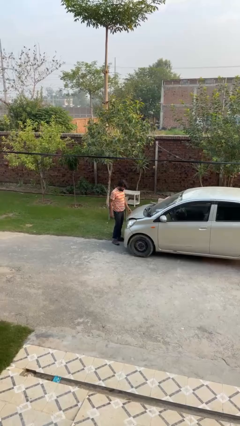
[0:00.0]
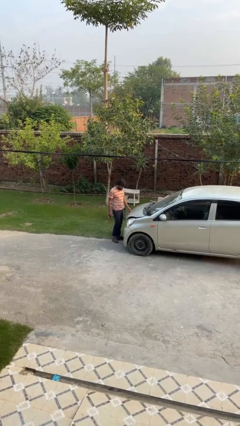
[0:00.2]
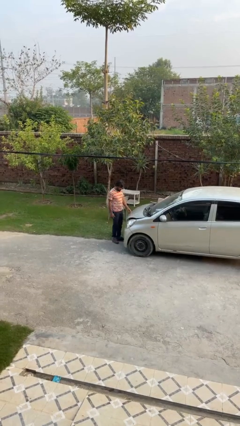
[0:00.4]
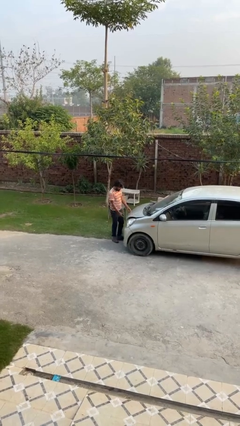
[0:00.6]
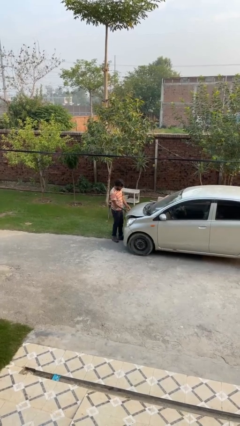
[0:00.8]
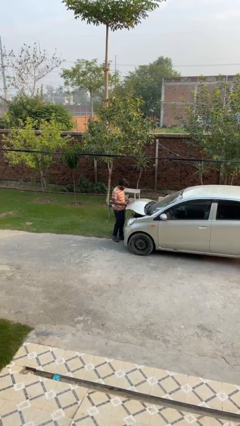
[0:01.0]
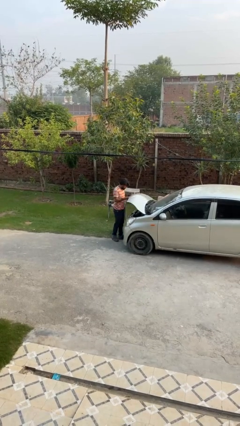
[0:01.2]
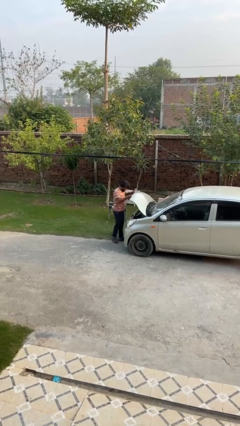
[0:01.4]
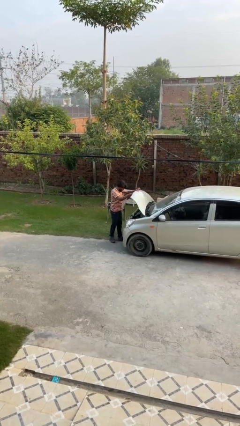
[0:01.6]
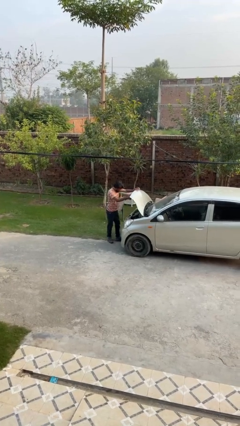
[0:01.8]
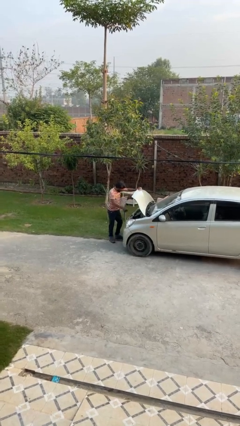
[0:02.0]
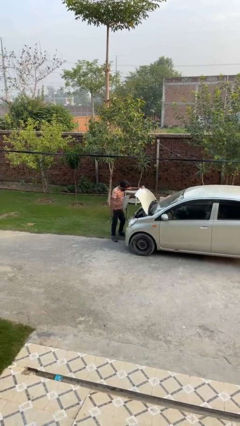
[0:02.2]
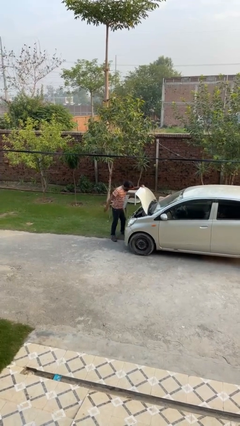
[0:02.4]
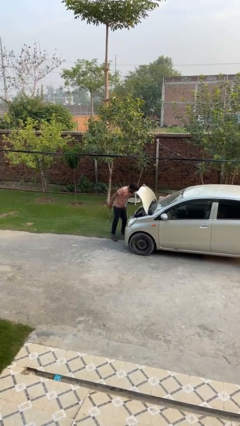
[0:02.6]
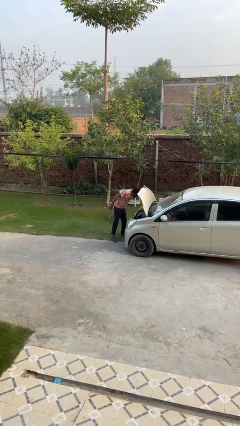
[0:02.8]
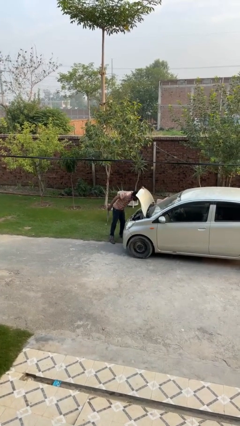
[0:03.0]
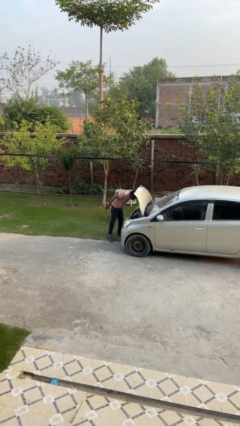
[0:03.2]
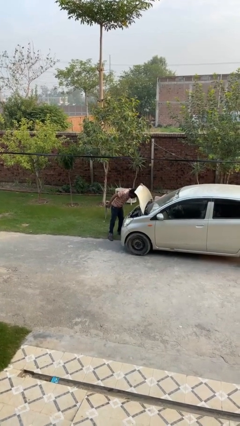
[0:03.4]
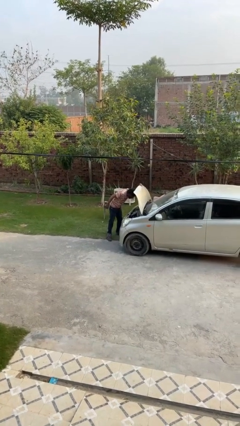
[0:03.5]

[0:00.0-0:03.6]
person opens car hood

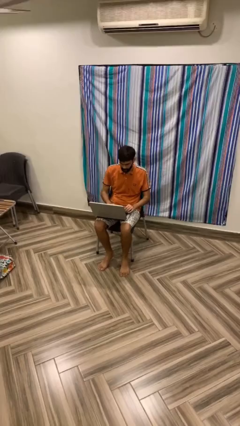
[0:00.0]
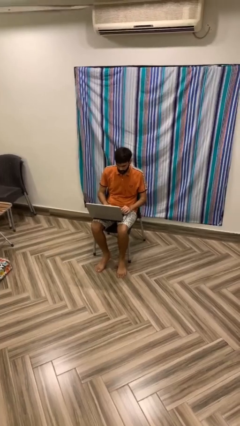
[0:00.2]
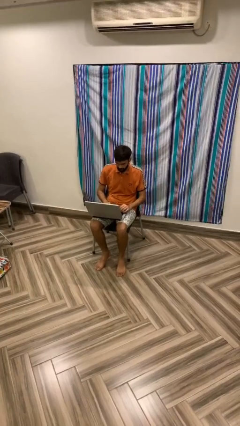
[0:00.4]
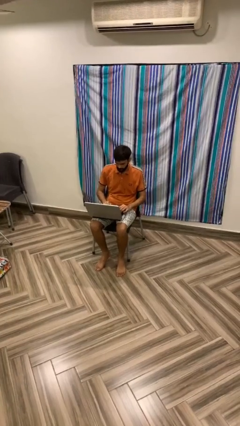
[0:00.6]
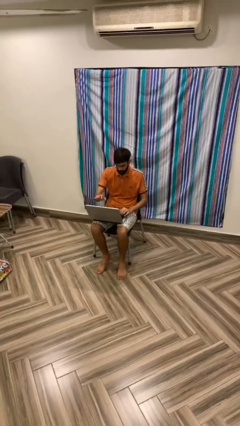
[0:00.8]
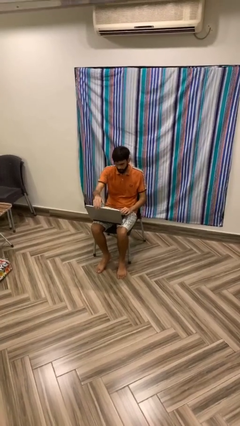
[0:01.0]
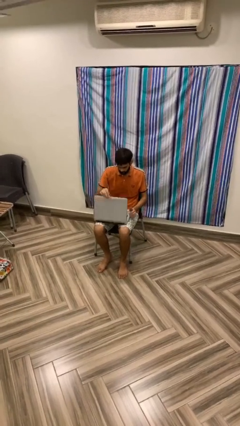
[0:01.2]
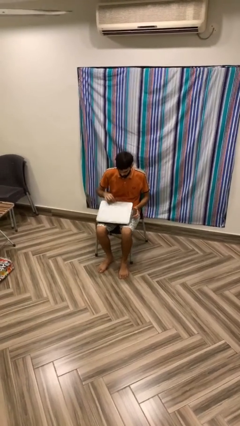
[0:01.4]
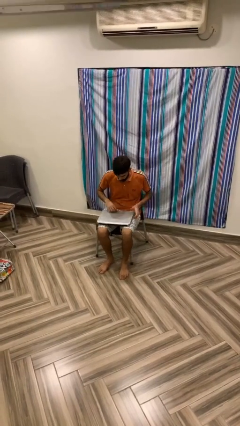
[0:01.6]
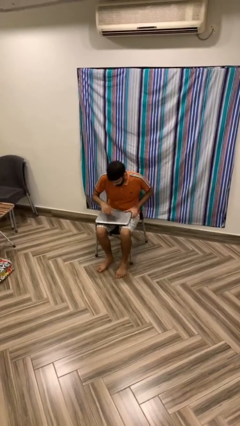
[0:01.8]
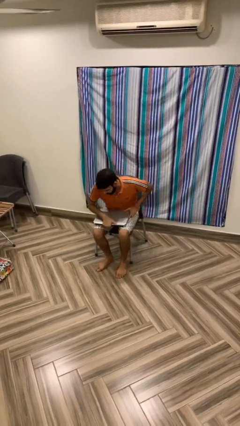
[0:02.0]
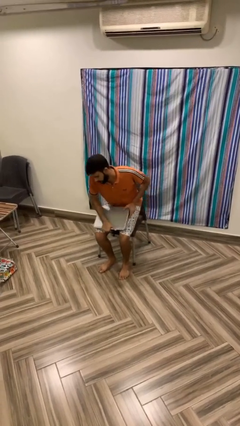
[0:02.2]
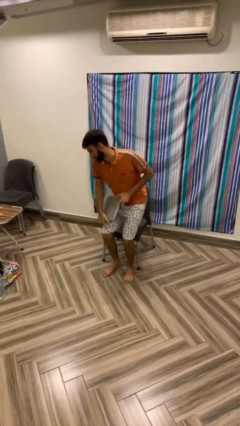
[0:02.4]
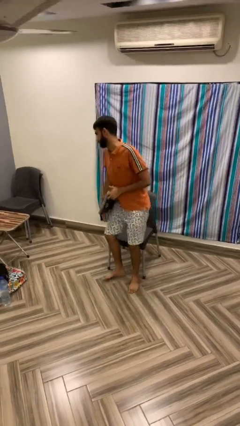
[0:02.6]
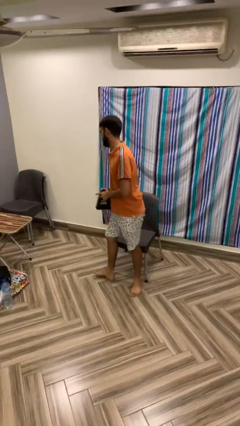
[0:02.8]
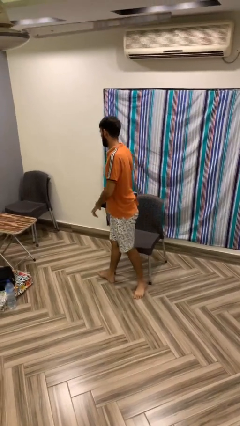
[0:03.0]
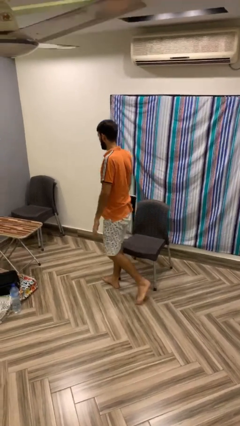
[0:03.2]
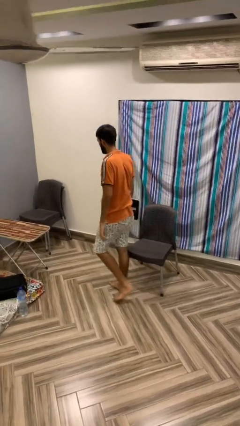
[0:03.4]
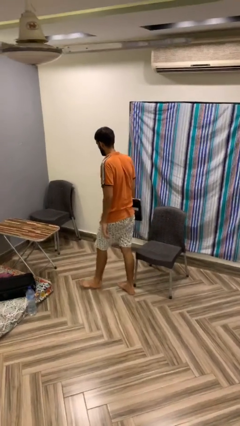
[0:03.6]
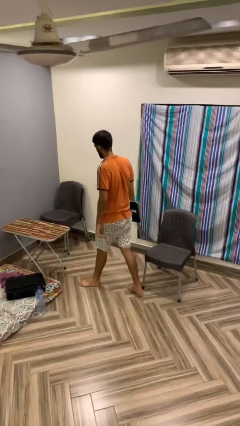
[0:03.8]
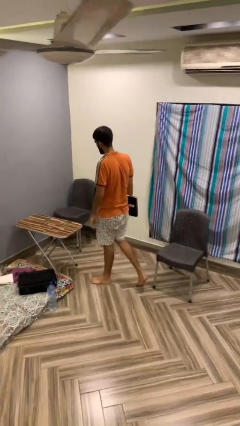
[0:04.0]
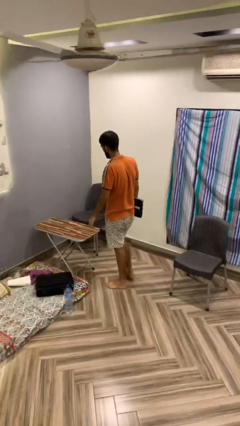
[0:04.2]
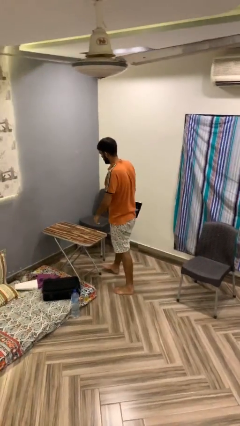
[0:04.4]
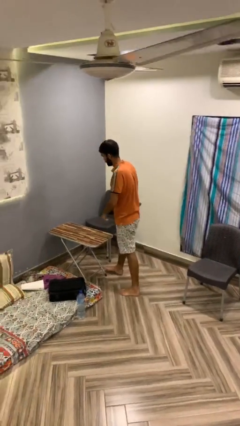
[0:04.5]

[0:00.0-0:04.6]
person stands up

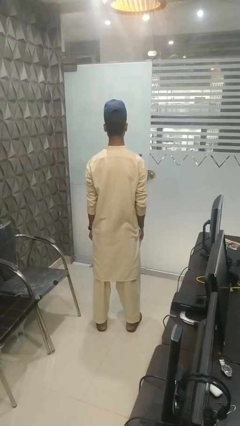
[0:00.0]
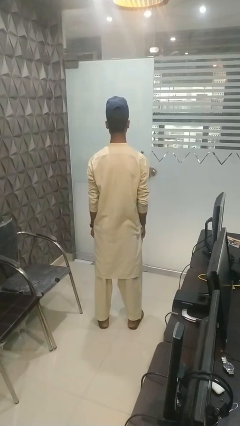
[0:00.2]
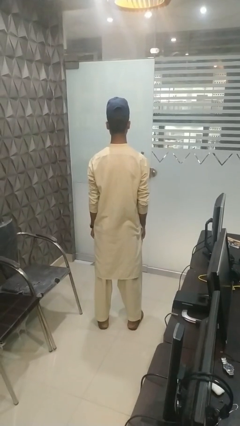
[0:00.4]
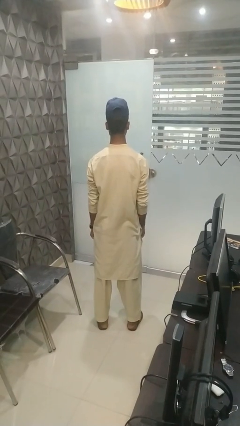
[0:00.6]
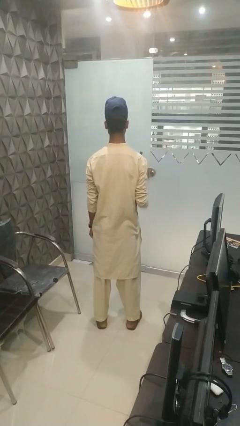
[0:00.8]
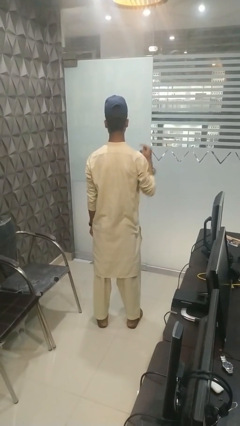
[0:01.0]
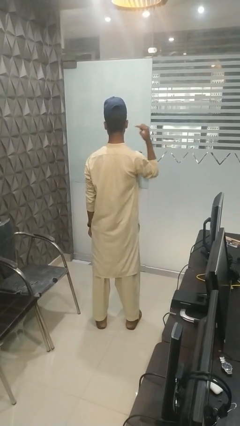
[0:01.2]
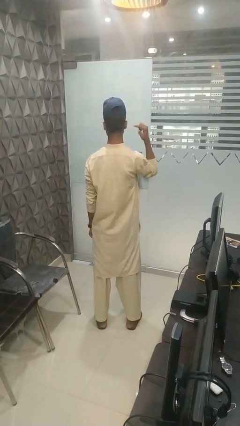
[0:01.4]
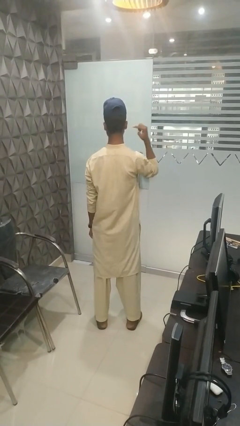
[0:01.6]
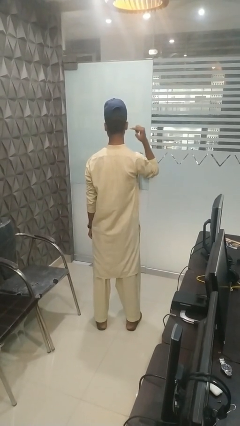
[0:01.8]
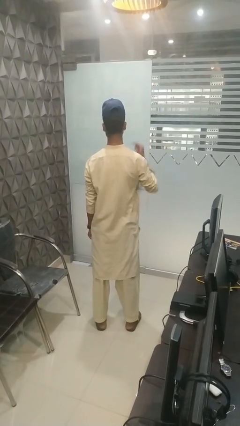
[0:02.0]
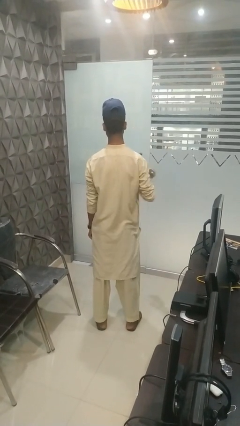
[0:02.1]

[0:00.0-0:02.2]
person gestures listen closely

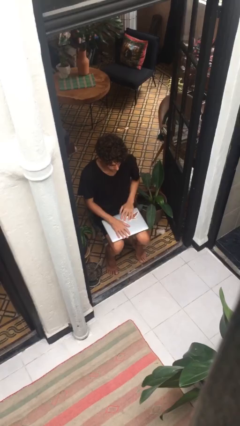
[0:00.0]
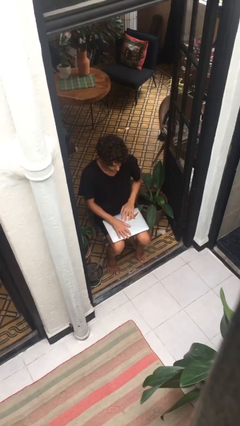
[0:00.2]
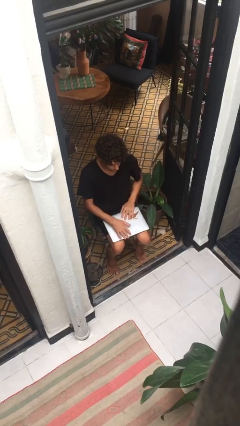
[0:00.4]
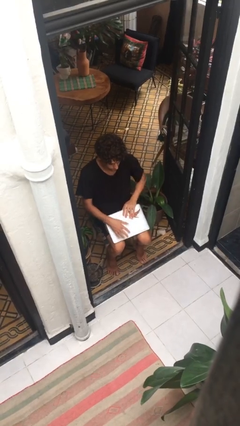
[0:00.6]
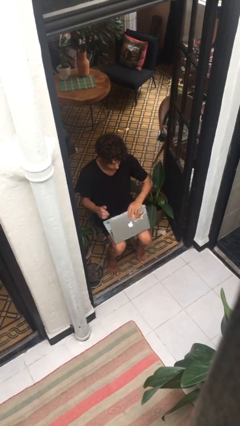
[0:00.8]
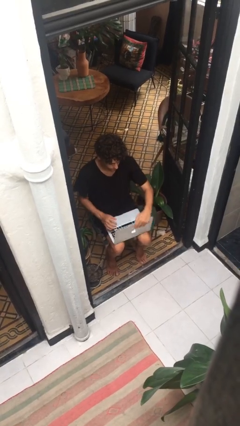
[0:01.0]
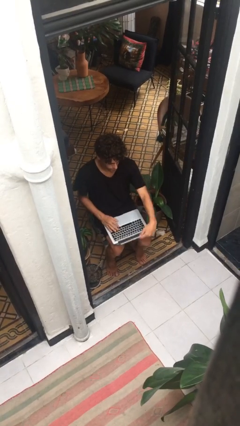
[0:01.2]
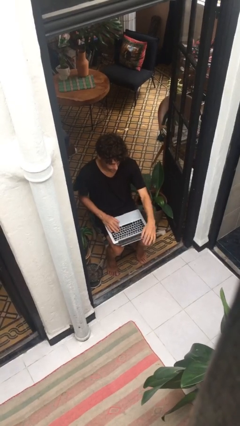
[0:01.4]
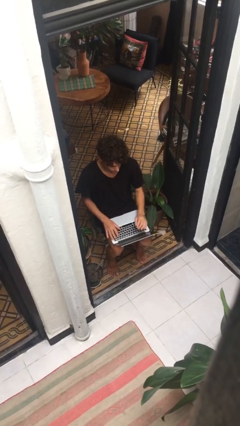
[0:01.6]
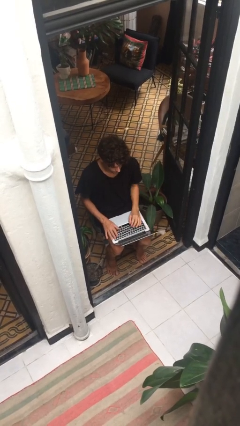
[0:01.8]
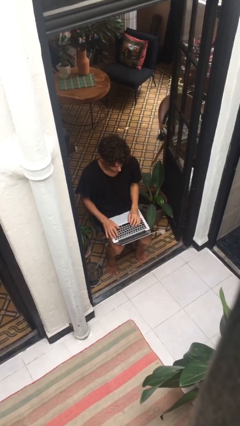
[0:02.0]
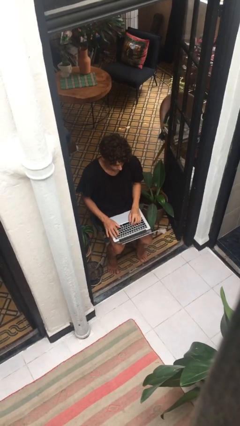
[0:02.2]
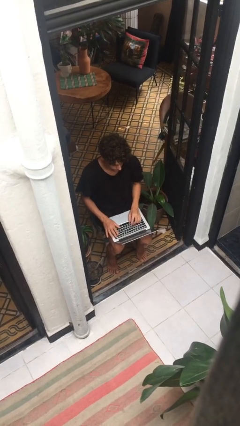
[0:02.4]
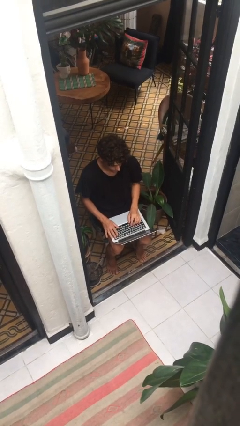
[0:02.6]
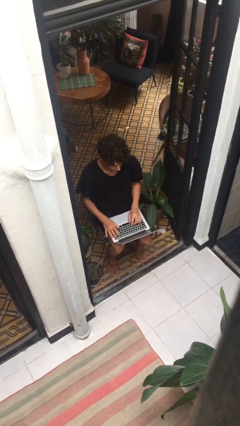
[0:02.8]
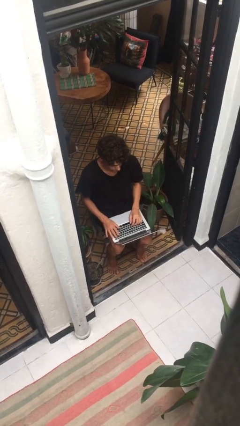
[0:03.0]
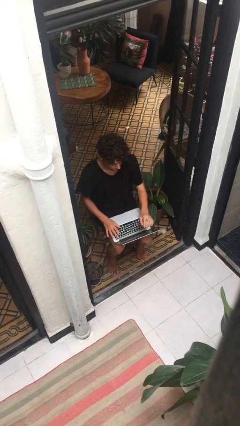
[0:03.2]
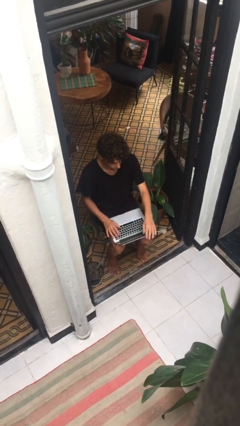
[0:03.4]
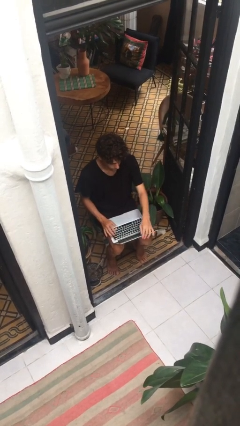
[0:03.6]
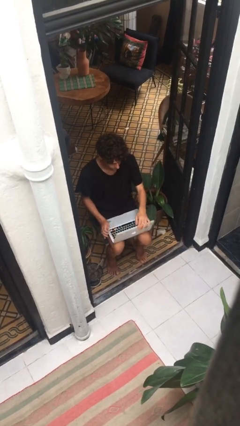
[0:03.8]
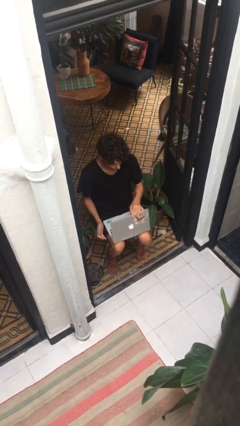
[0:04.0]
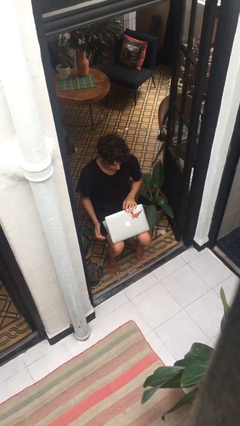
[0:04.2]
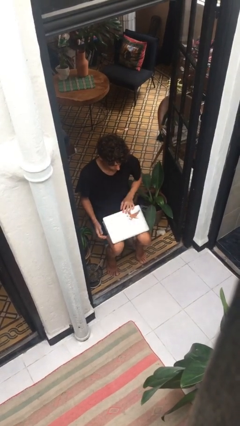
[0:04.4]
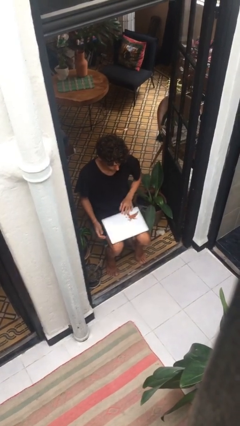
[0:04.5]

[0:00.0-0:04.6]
person interacts with laptop

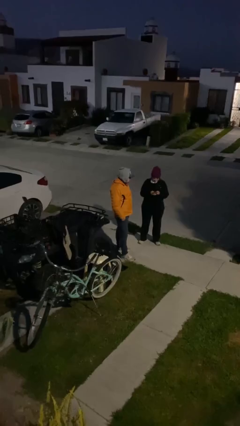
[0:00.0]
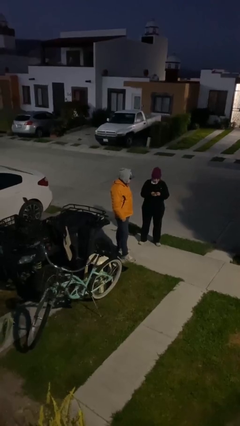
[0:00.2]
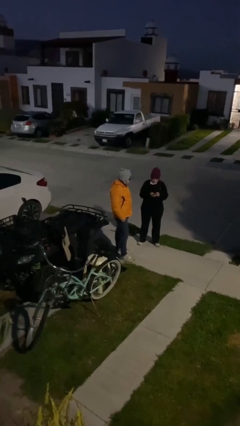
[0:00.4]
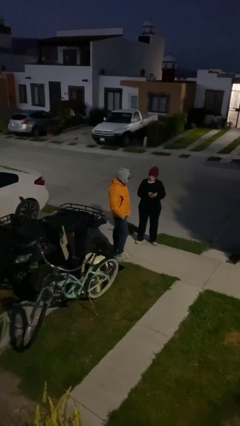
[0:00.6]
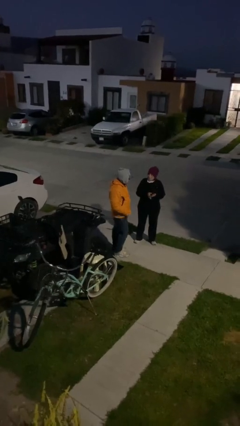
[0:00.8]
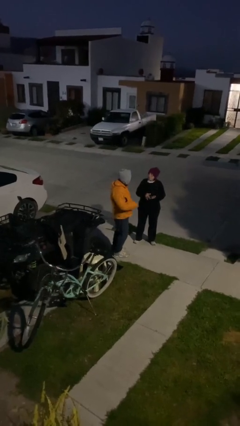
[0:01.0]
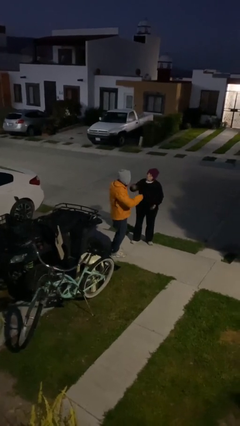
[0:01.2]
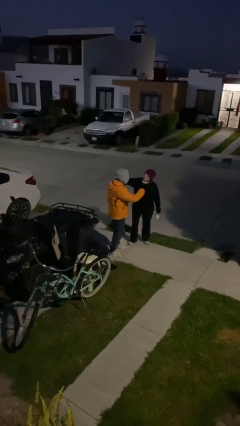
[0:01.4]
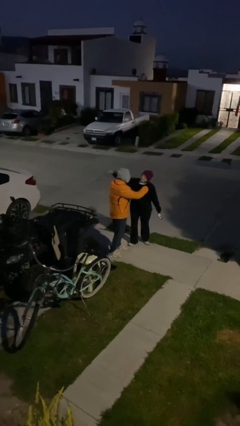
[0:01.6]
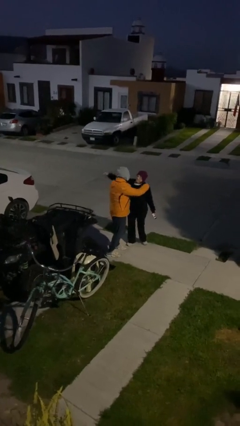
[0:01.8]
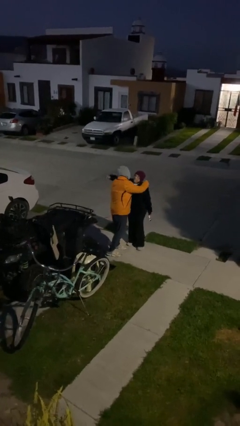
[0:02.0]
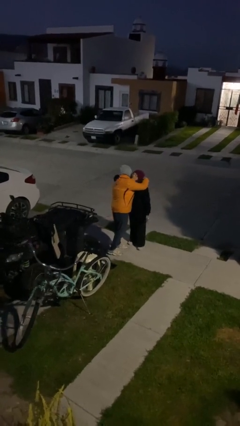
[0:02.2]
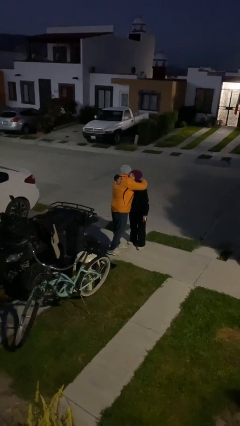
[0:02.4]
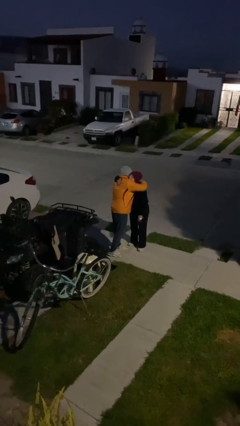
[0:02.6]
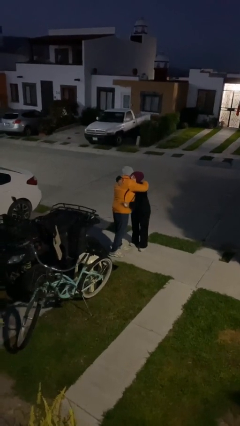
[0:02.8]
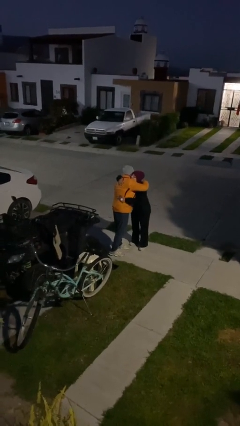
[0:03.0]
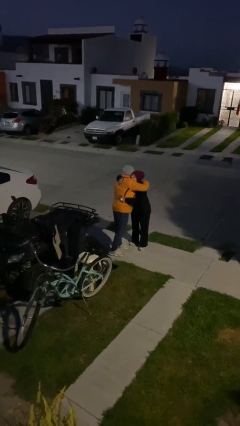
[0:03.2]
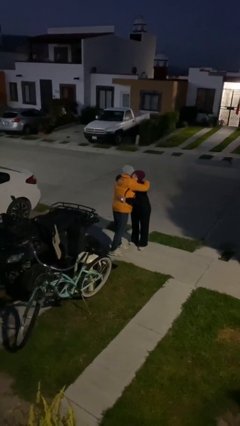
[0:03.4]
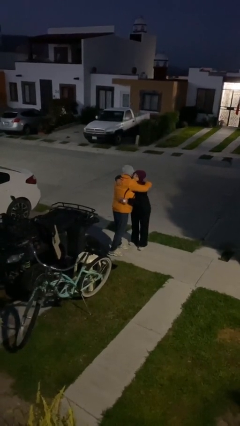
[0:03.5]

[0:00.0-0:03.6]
person embraces person
